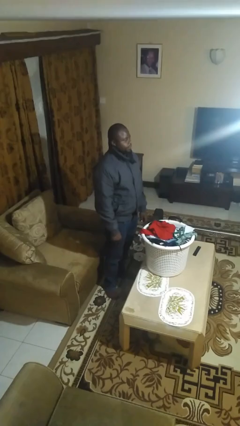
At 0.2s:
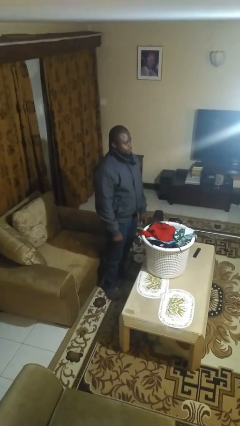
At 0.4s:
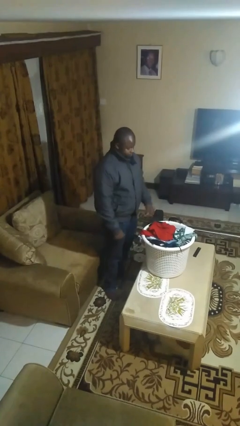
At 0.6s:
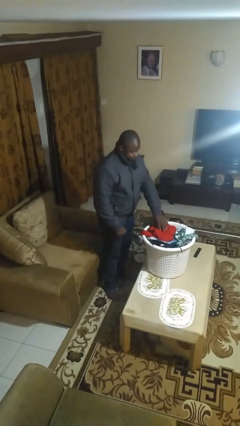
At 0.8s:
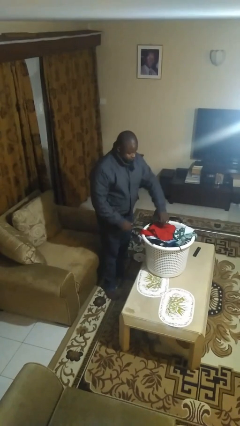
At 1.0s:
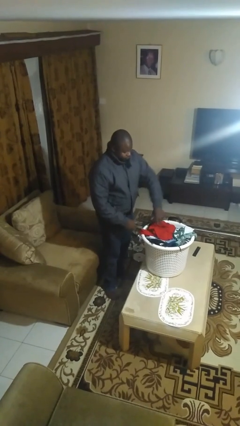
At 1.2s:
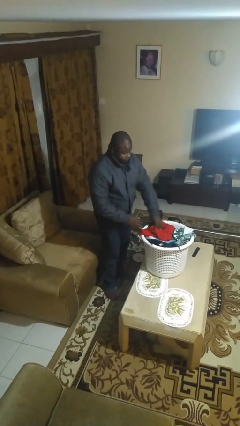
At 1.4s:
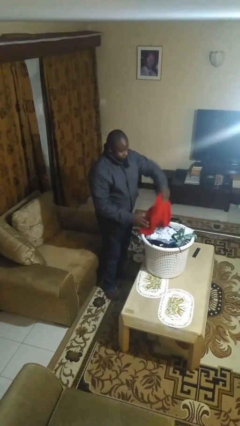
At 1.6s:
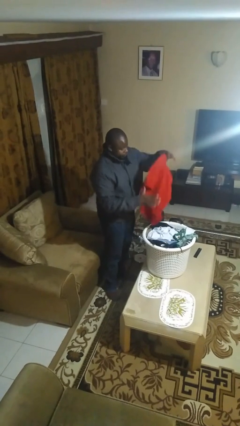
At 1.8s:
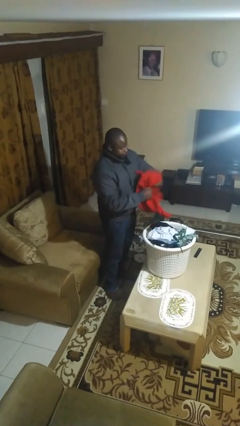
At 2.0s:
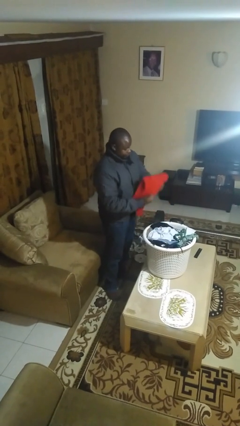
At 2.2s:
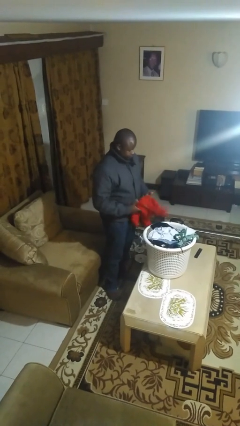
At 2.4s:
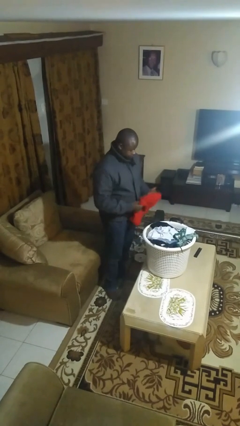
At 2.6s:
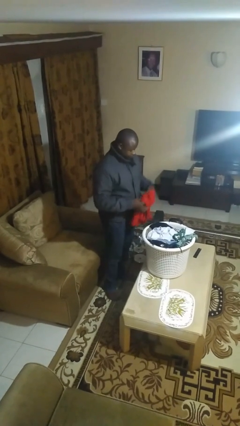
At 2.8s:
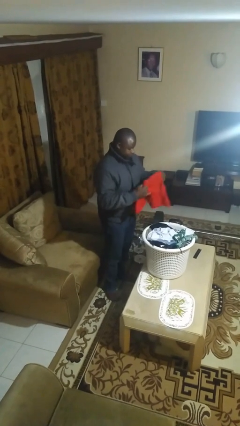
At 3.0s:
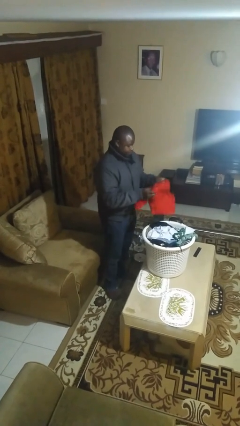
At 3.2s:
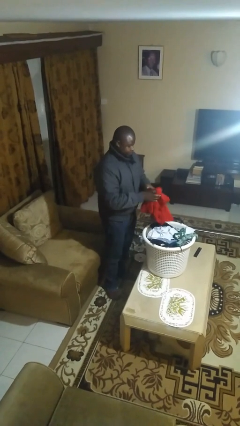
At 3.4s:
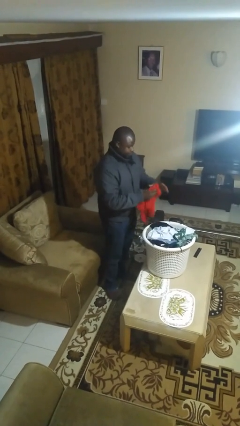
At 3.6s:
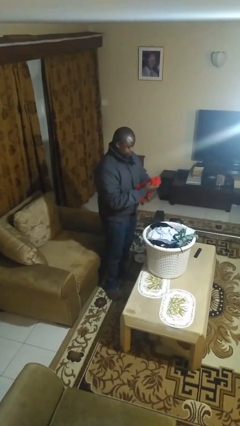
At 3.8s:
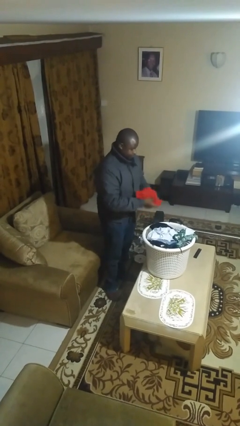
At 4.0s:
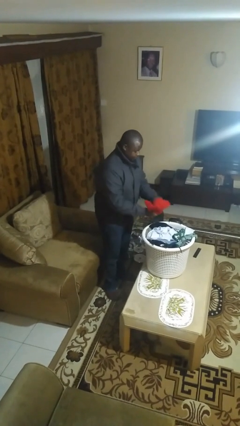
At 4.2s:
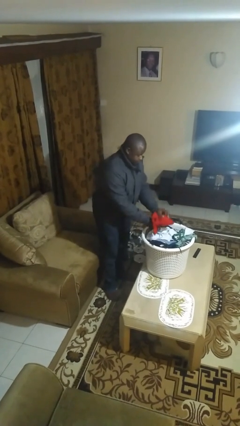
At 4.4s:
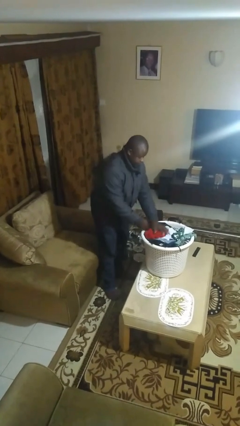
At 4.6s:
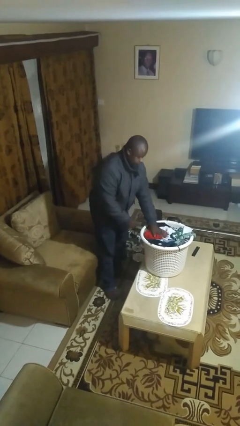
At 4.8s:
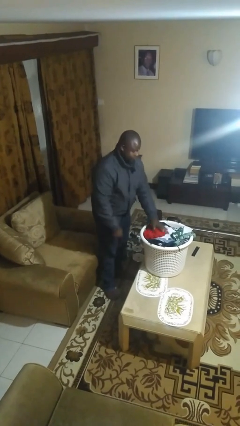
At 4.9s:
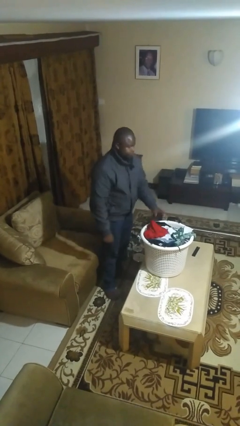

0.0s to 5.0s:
person folds shirt

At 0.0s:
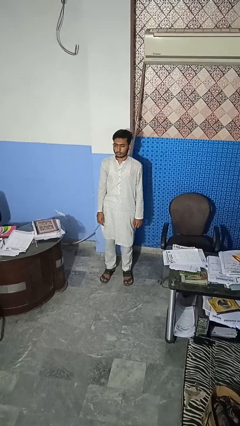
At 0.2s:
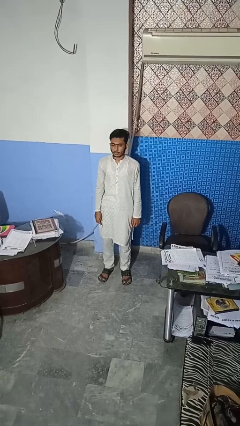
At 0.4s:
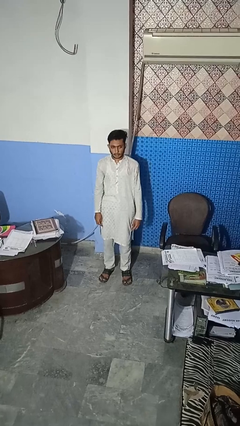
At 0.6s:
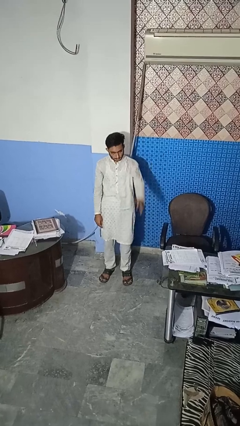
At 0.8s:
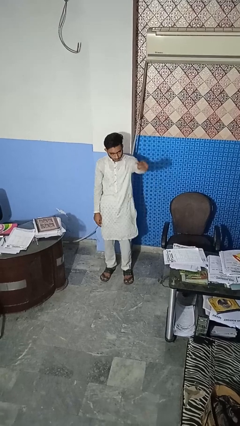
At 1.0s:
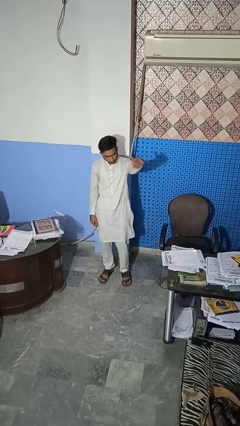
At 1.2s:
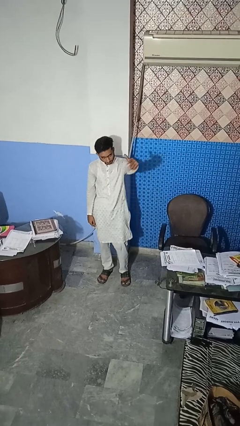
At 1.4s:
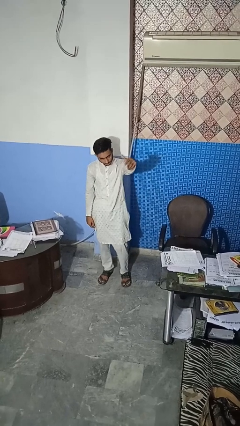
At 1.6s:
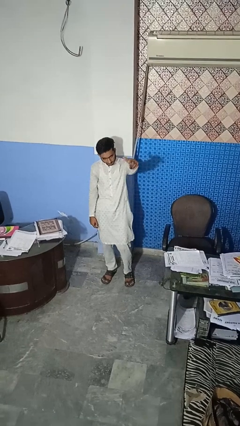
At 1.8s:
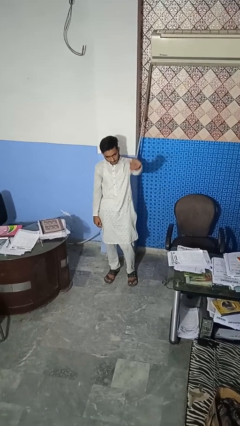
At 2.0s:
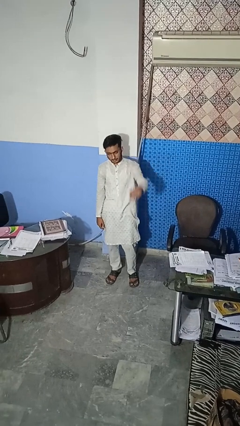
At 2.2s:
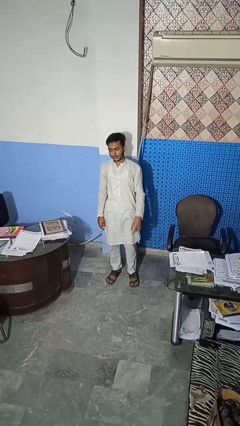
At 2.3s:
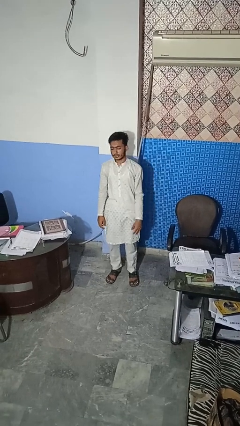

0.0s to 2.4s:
person gestures come here

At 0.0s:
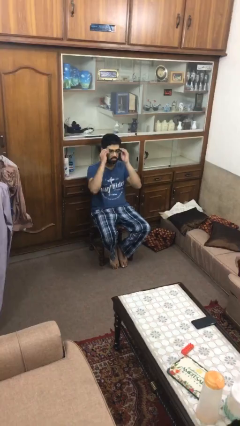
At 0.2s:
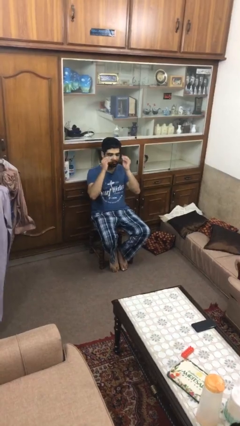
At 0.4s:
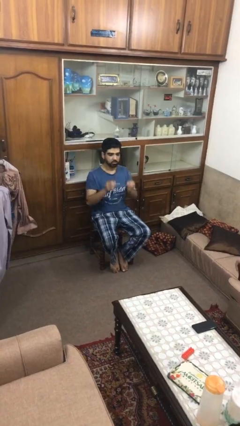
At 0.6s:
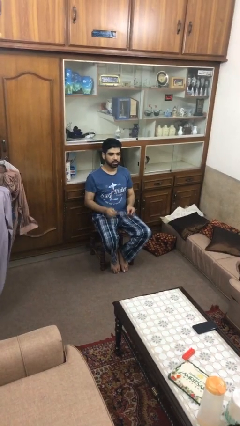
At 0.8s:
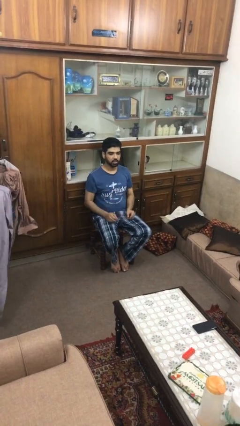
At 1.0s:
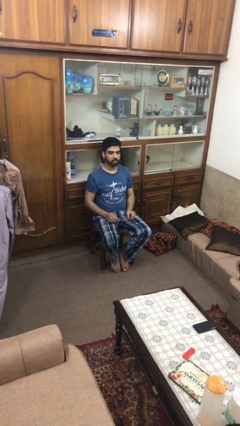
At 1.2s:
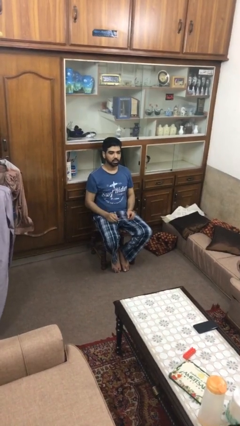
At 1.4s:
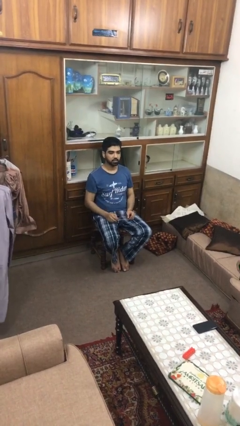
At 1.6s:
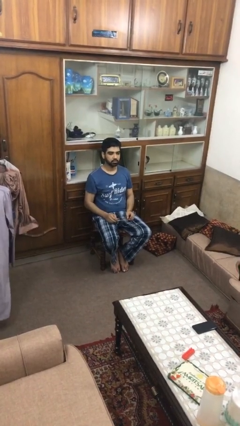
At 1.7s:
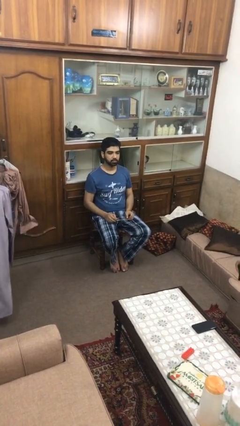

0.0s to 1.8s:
person takes off glasses

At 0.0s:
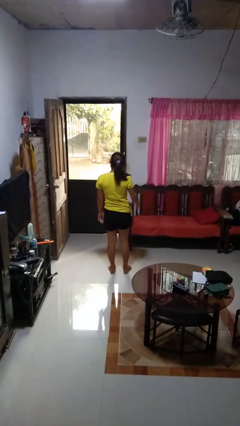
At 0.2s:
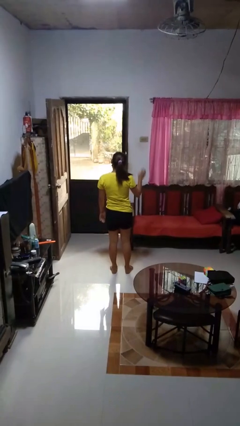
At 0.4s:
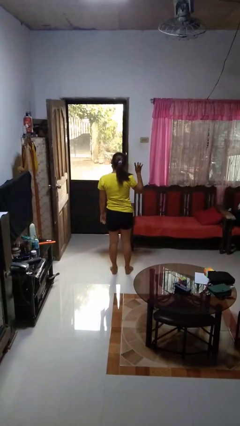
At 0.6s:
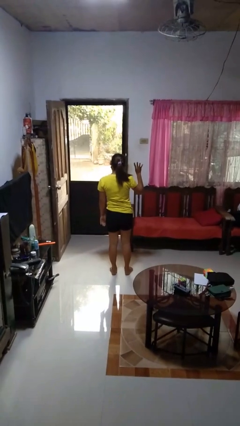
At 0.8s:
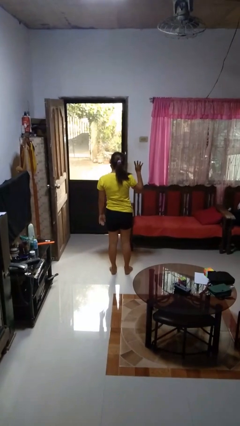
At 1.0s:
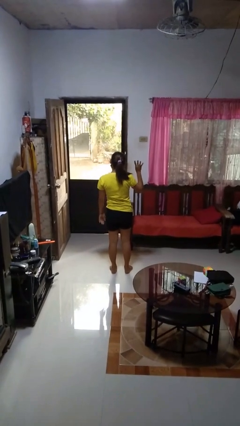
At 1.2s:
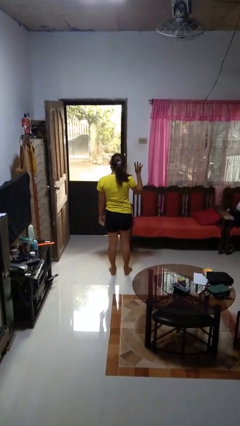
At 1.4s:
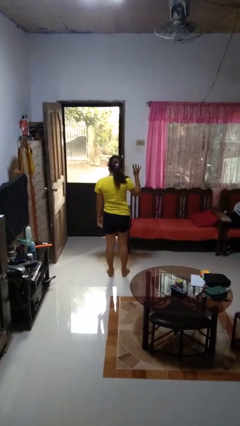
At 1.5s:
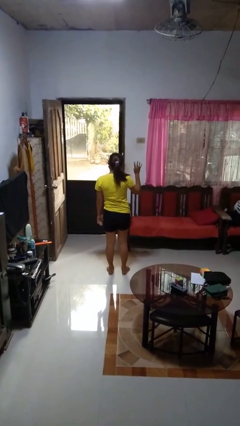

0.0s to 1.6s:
person gestures number four

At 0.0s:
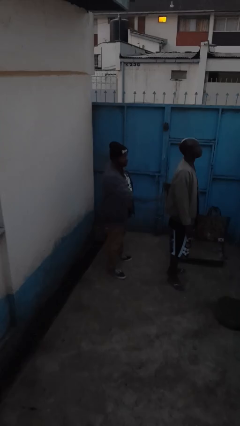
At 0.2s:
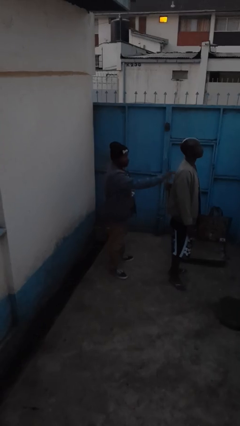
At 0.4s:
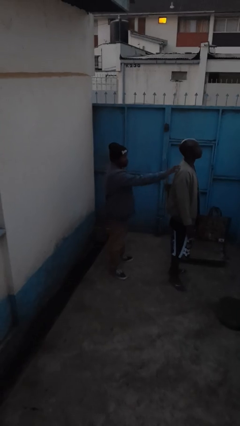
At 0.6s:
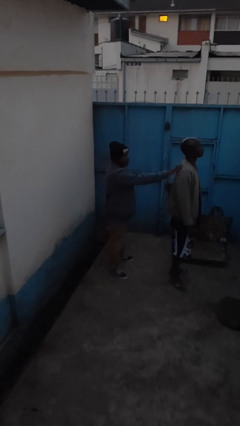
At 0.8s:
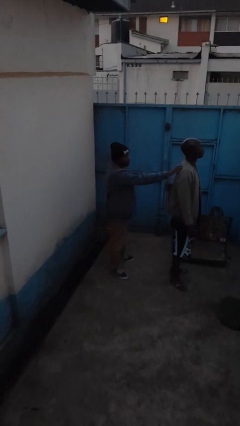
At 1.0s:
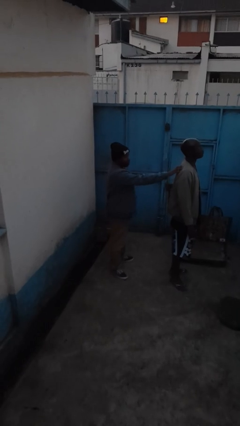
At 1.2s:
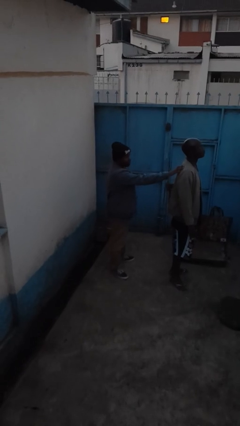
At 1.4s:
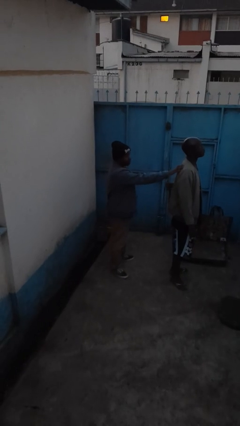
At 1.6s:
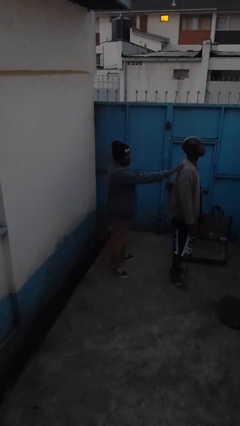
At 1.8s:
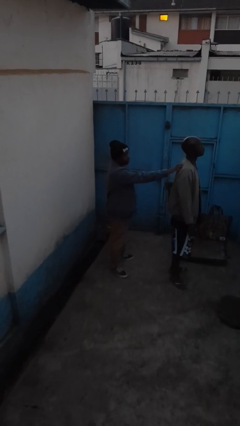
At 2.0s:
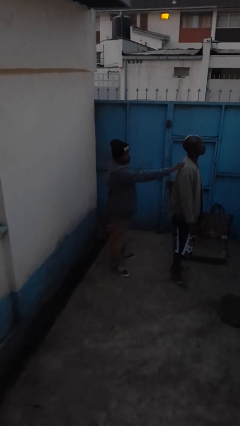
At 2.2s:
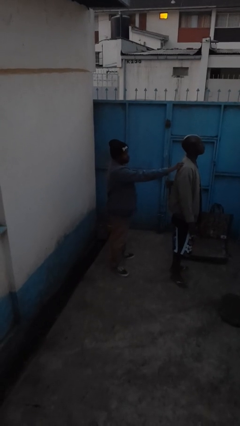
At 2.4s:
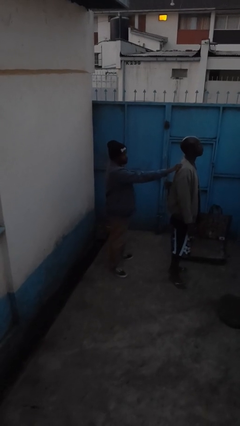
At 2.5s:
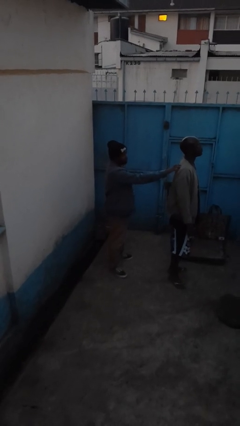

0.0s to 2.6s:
person touches back of person

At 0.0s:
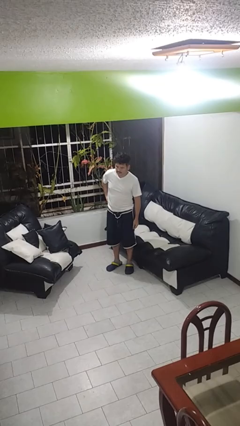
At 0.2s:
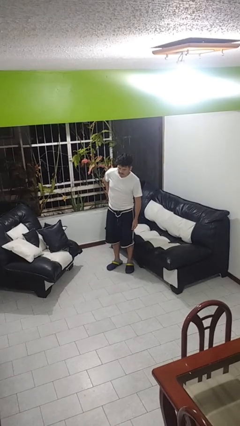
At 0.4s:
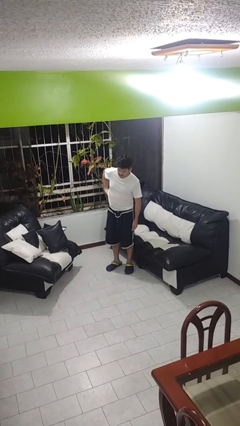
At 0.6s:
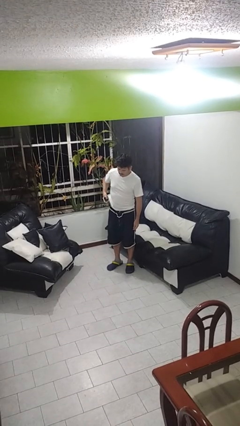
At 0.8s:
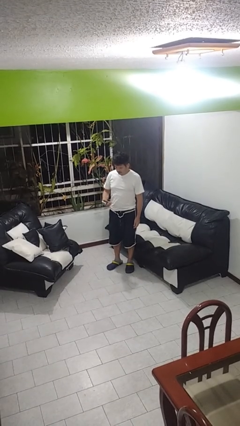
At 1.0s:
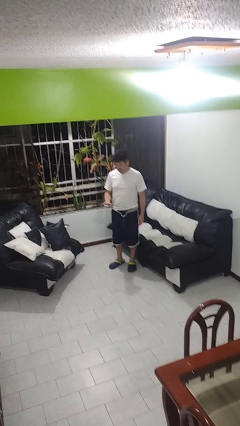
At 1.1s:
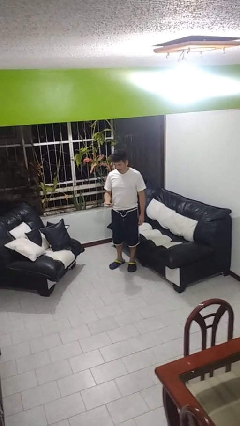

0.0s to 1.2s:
person takes phone from pocket

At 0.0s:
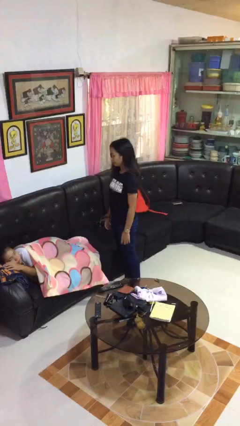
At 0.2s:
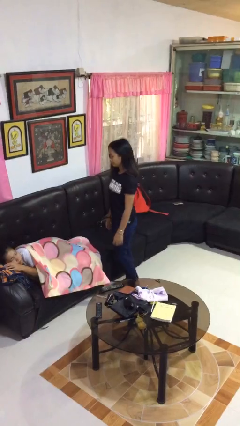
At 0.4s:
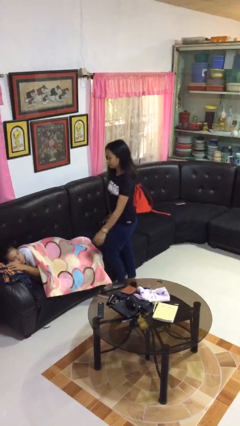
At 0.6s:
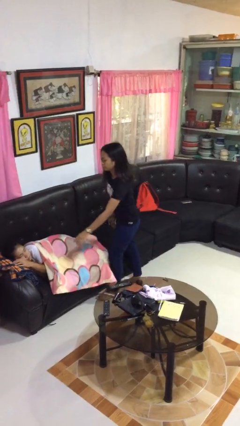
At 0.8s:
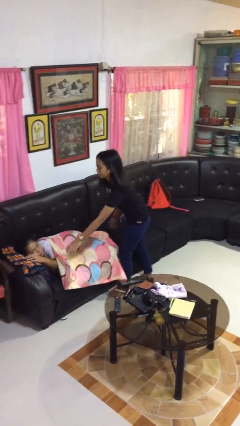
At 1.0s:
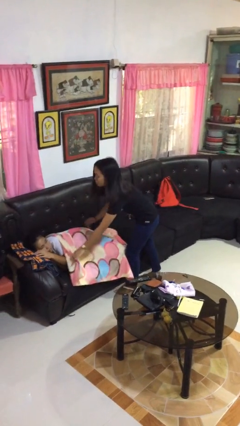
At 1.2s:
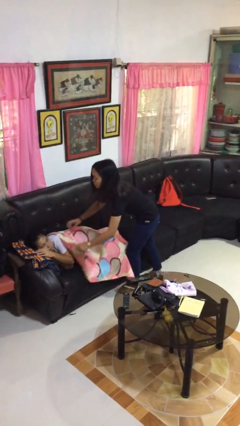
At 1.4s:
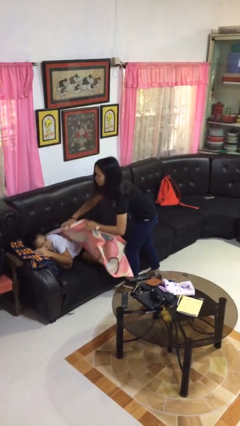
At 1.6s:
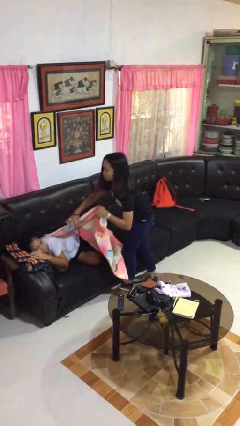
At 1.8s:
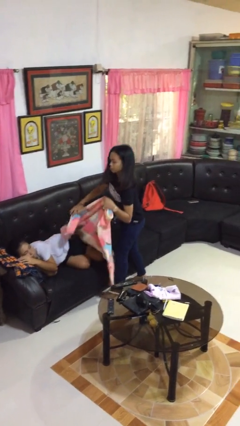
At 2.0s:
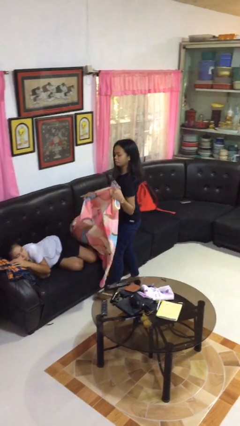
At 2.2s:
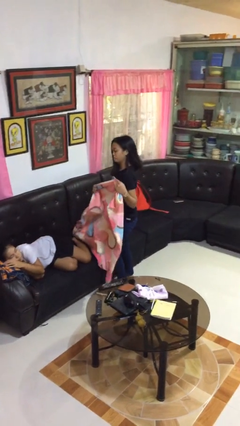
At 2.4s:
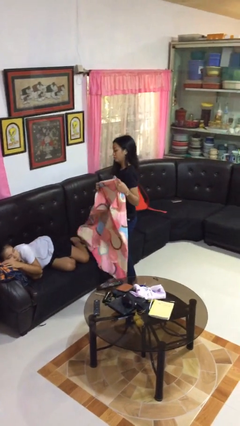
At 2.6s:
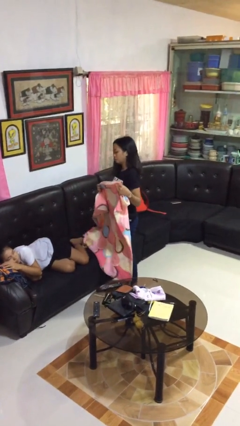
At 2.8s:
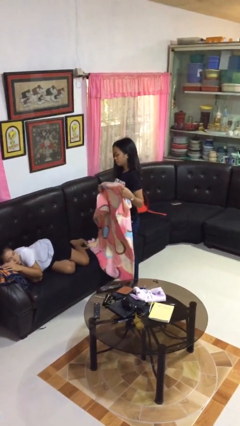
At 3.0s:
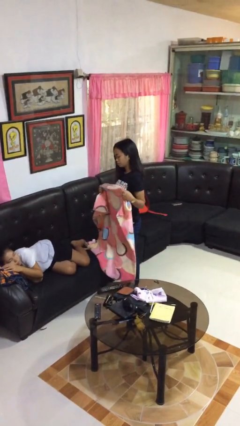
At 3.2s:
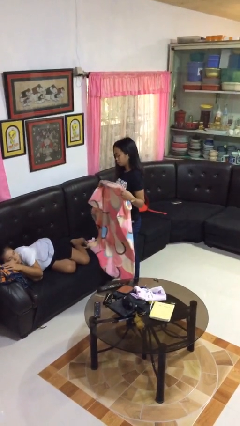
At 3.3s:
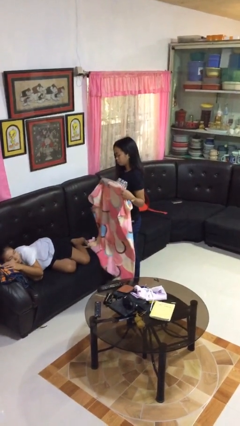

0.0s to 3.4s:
person uncovers friend with blanket
